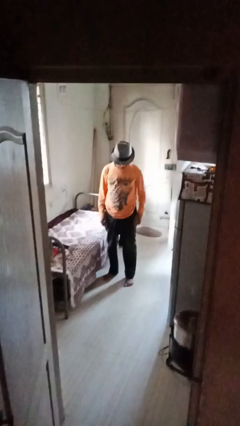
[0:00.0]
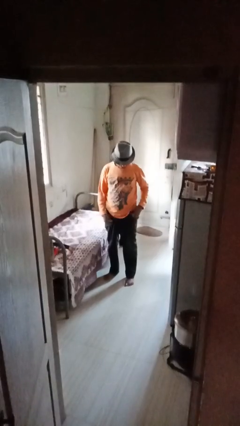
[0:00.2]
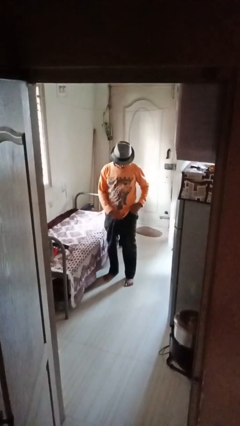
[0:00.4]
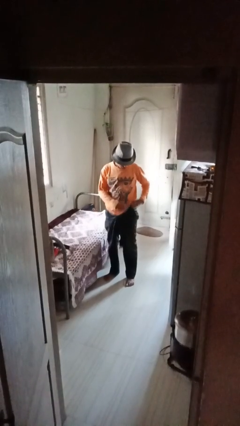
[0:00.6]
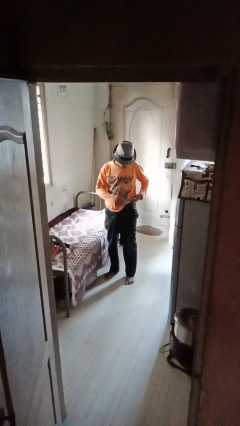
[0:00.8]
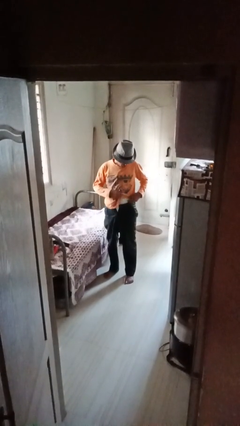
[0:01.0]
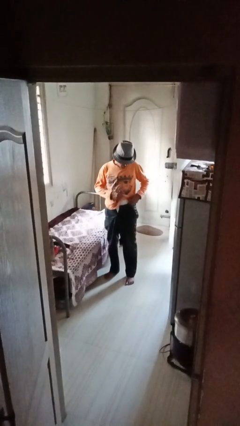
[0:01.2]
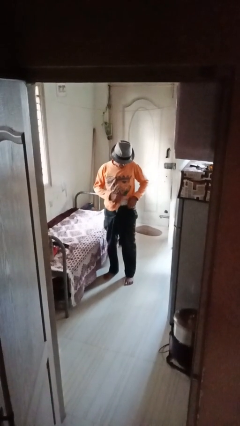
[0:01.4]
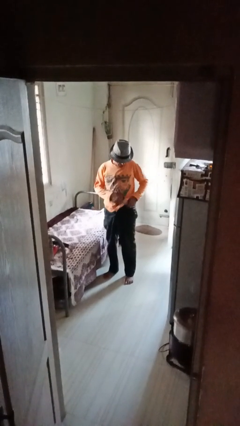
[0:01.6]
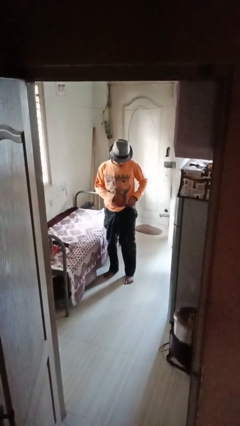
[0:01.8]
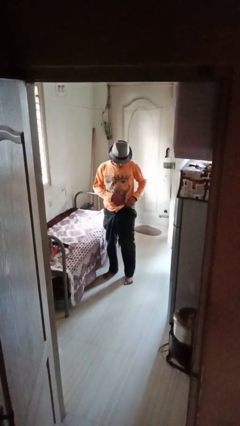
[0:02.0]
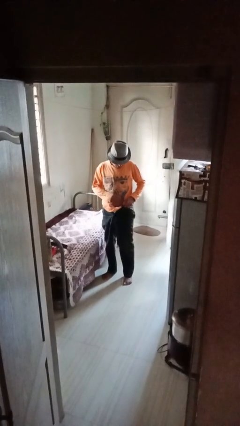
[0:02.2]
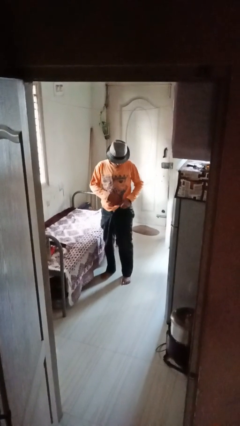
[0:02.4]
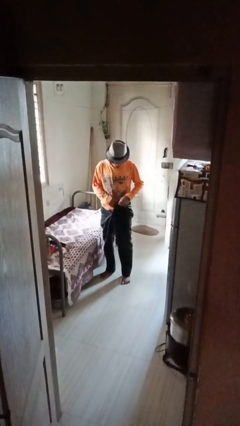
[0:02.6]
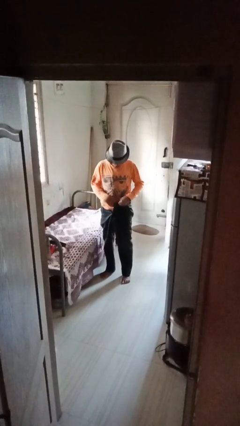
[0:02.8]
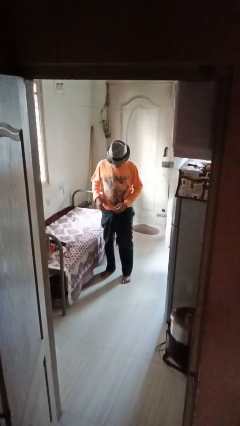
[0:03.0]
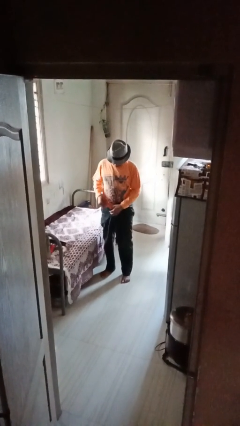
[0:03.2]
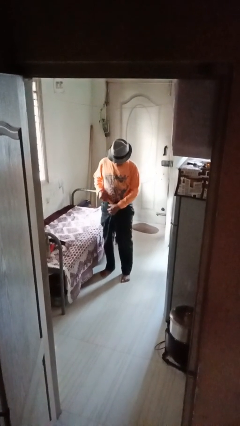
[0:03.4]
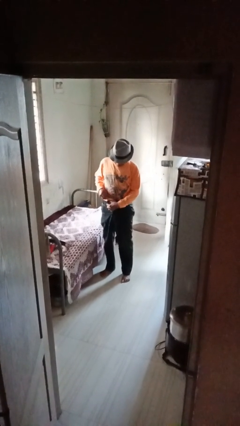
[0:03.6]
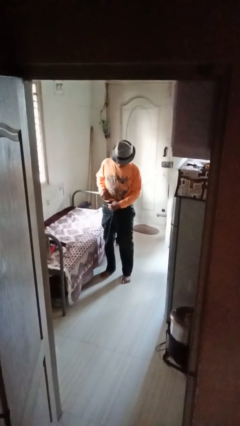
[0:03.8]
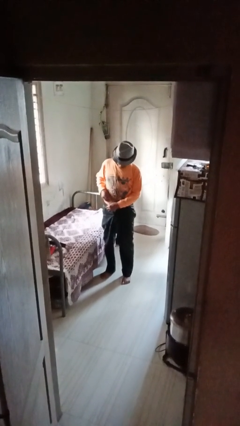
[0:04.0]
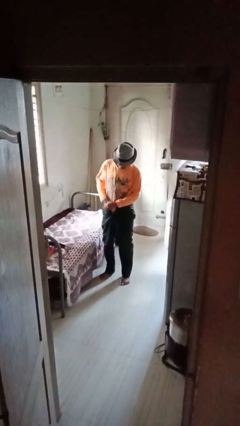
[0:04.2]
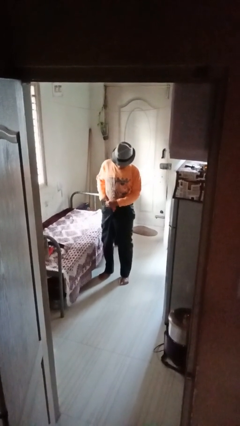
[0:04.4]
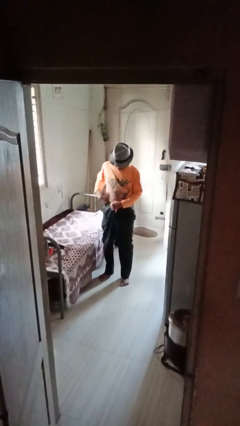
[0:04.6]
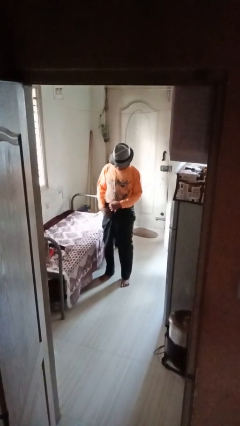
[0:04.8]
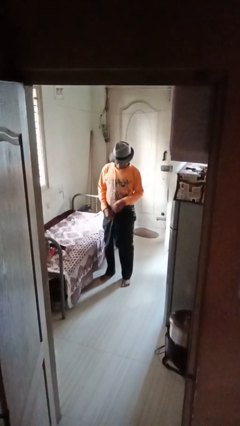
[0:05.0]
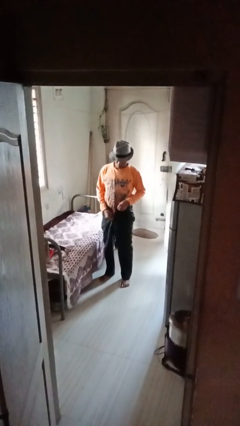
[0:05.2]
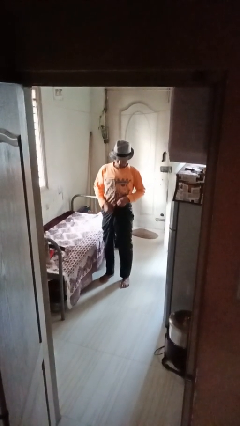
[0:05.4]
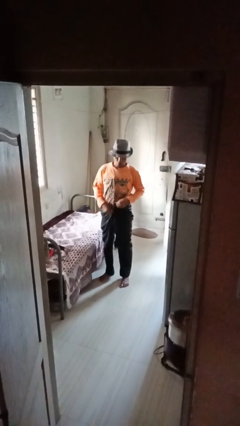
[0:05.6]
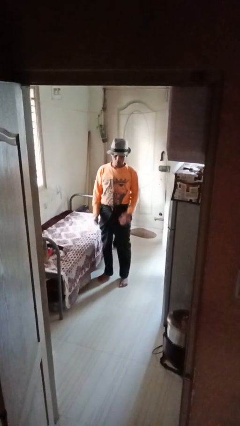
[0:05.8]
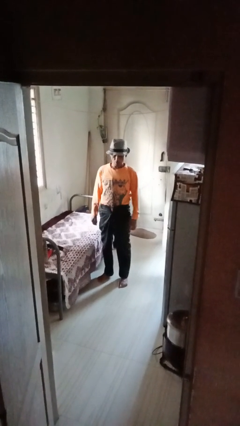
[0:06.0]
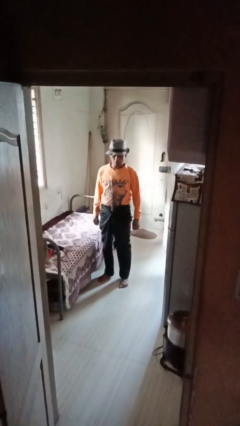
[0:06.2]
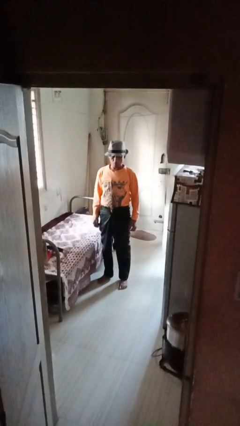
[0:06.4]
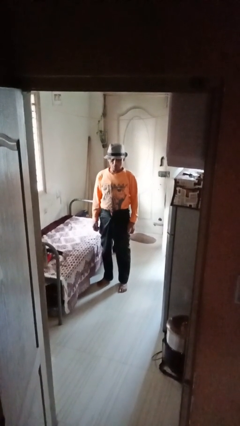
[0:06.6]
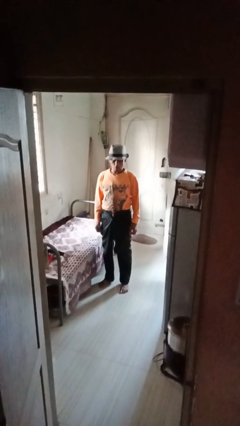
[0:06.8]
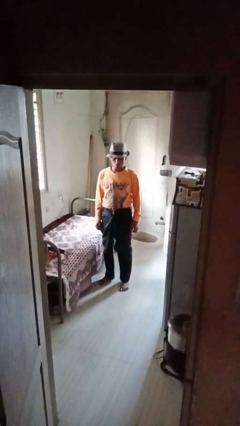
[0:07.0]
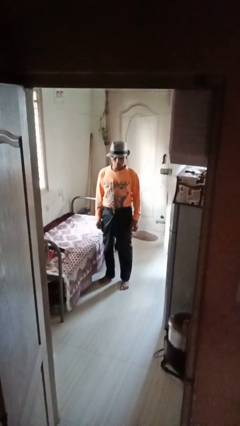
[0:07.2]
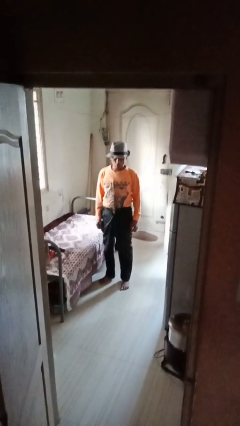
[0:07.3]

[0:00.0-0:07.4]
person tucks in shirt

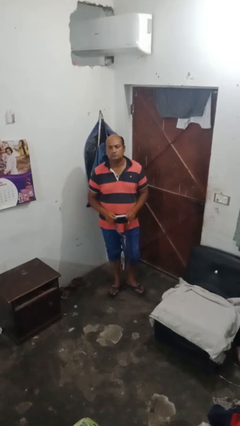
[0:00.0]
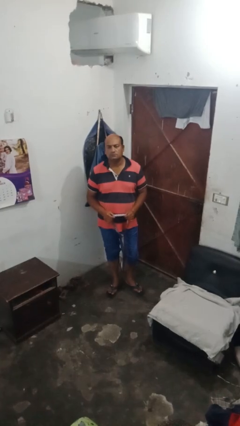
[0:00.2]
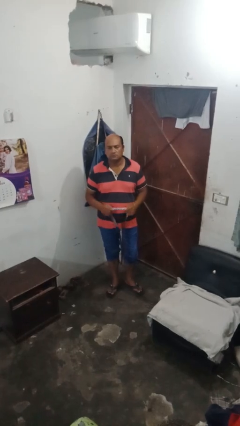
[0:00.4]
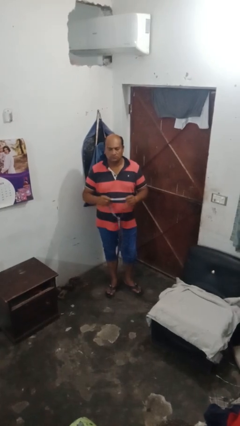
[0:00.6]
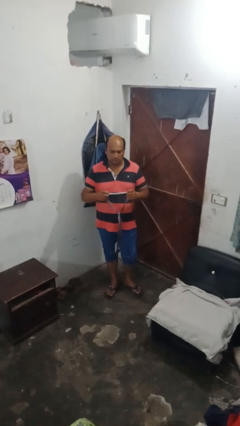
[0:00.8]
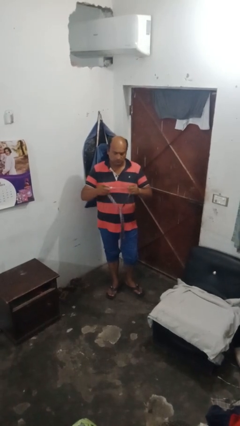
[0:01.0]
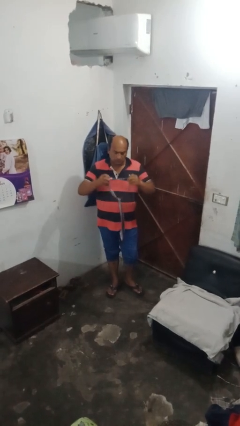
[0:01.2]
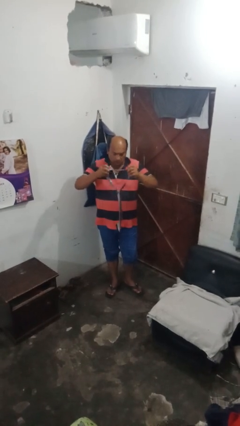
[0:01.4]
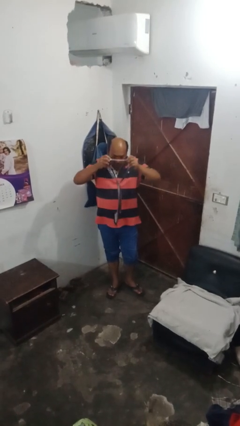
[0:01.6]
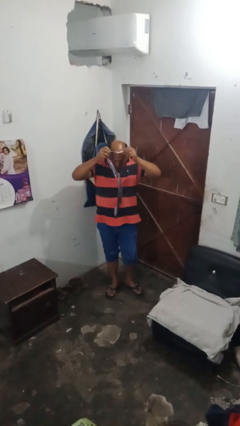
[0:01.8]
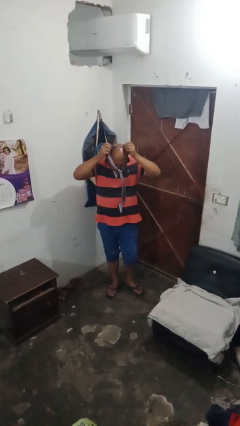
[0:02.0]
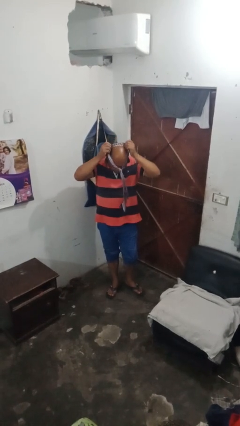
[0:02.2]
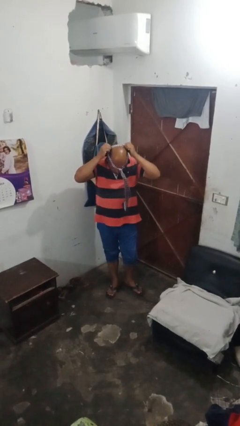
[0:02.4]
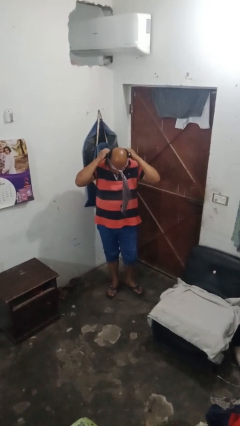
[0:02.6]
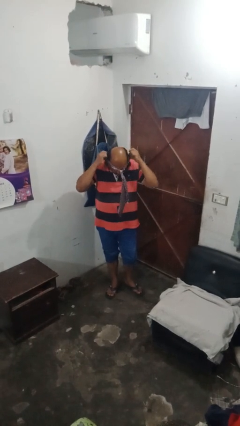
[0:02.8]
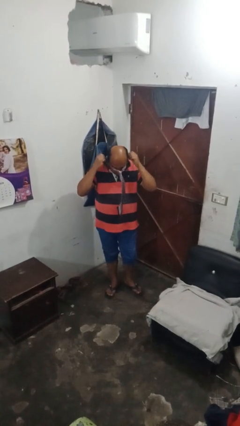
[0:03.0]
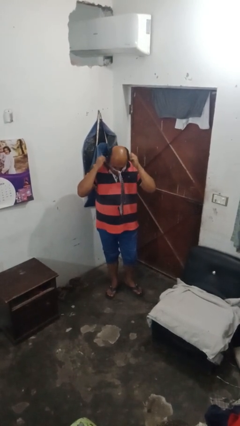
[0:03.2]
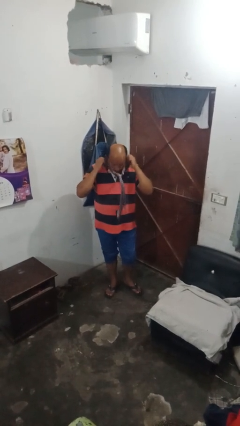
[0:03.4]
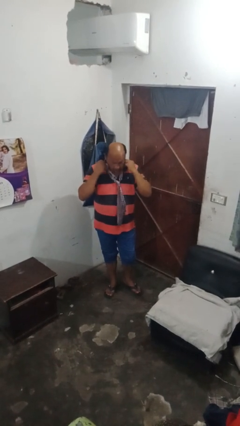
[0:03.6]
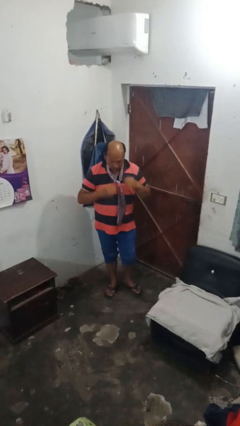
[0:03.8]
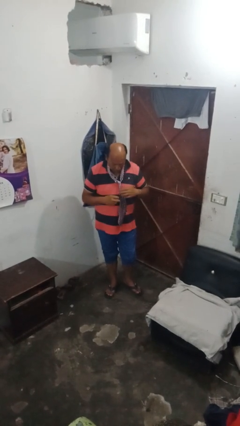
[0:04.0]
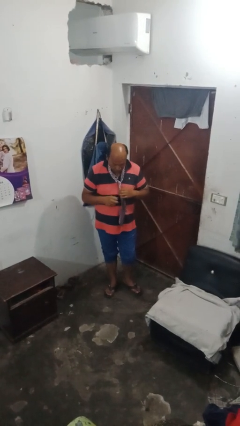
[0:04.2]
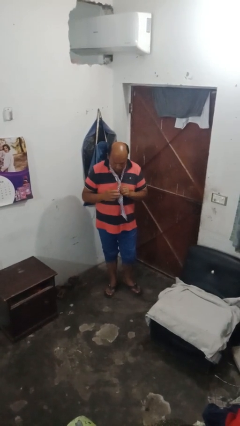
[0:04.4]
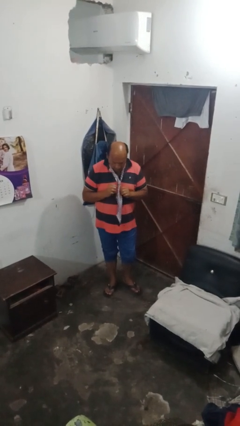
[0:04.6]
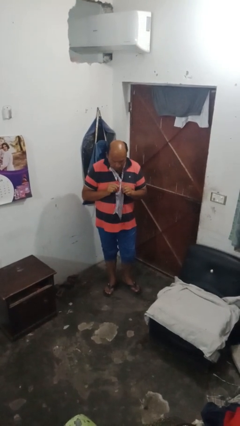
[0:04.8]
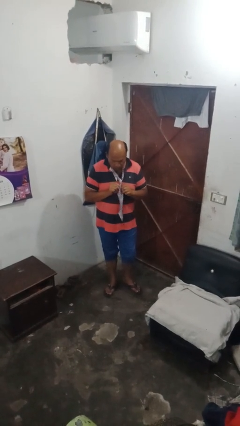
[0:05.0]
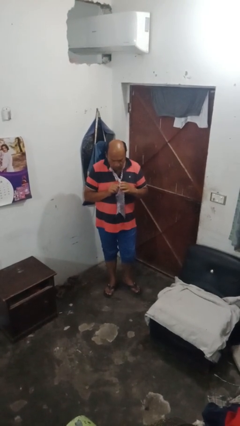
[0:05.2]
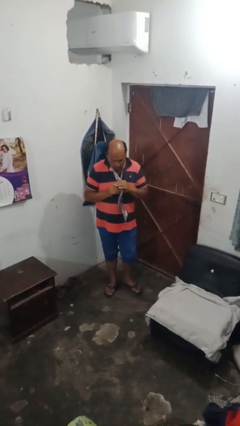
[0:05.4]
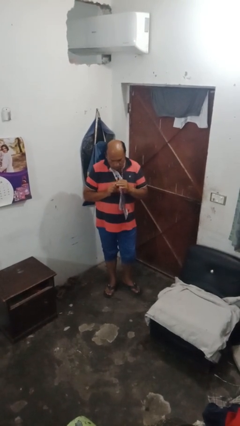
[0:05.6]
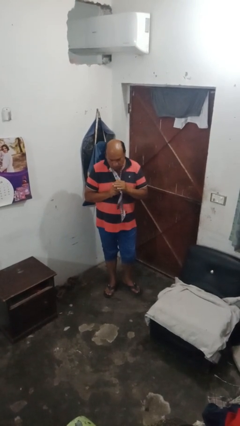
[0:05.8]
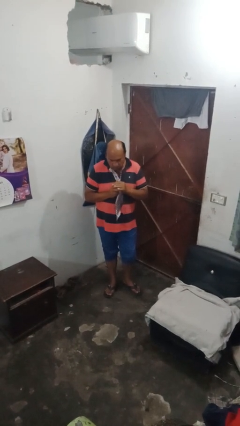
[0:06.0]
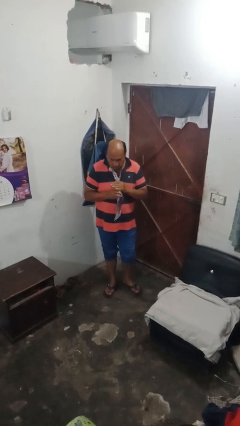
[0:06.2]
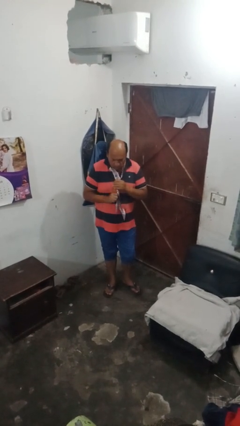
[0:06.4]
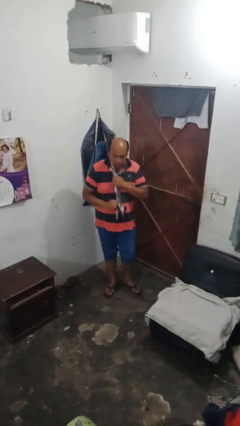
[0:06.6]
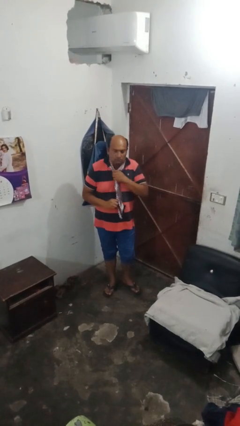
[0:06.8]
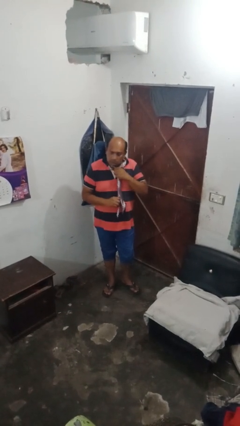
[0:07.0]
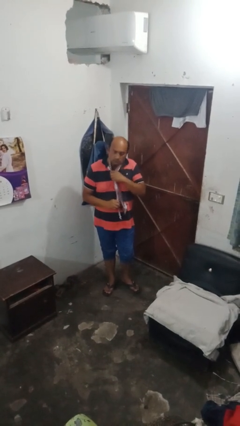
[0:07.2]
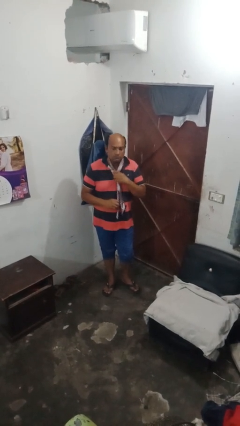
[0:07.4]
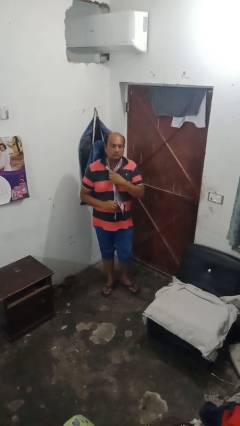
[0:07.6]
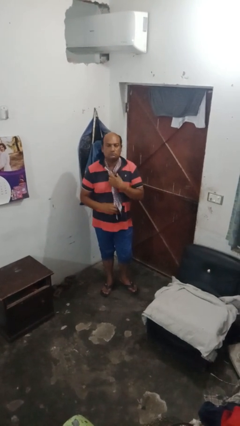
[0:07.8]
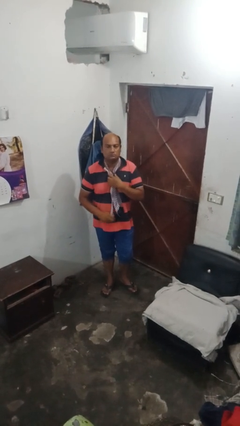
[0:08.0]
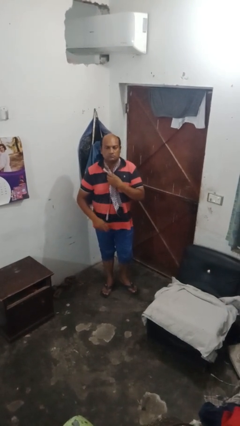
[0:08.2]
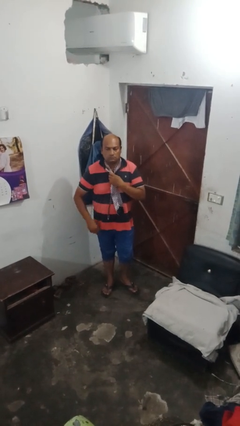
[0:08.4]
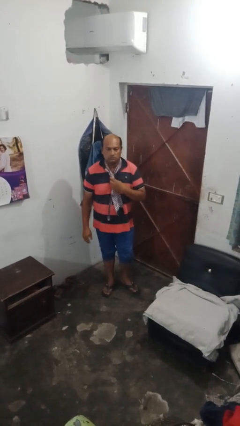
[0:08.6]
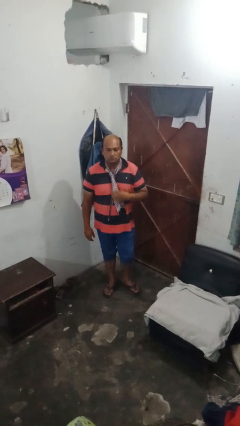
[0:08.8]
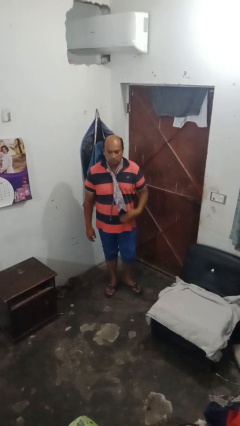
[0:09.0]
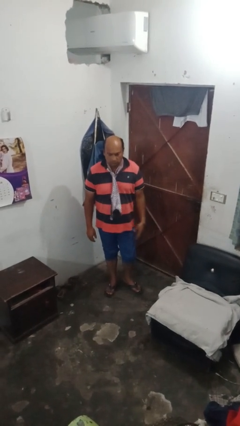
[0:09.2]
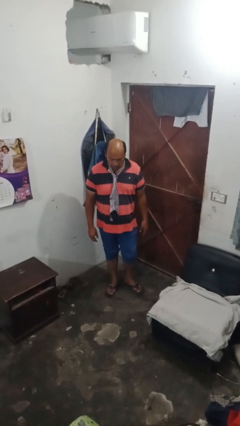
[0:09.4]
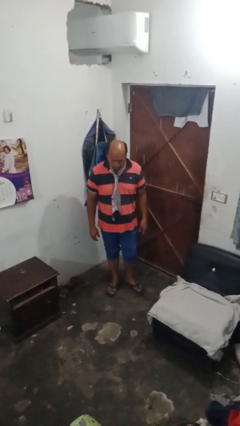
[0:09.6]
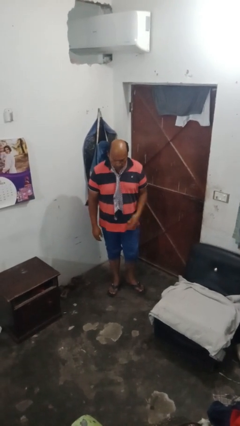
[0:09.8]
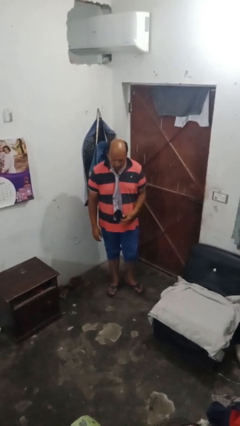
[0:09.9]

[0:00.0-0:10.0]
person puts on necktie

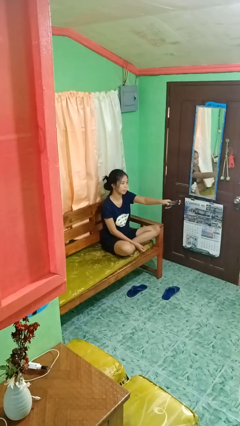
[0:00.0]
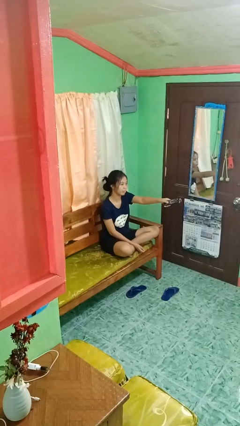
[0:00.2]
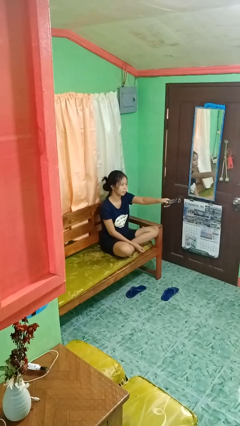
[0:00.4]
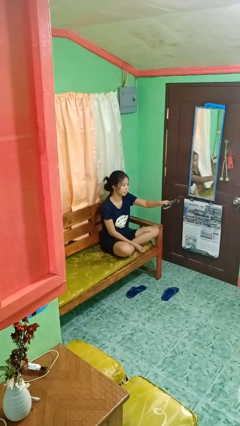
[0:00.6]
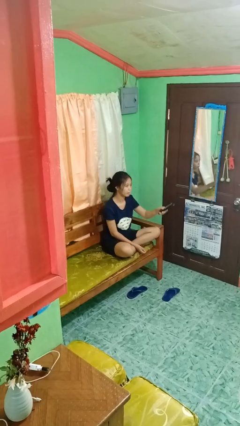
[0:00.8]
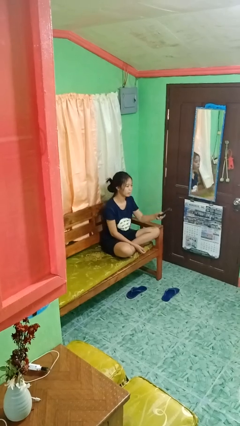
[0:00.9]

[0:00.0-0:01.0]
person uses television remote
